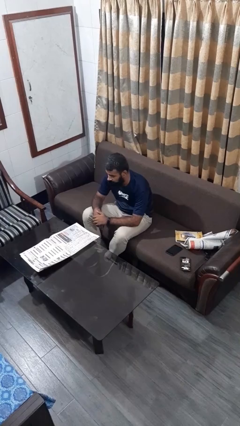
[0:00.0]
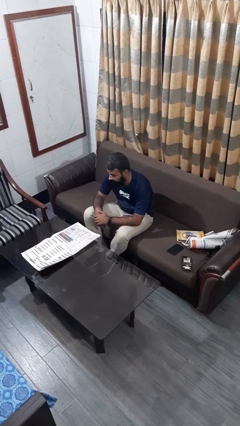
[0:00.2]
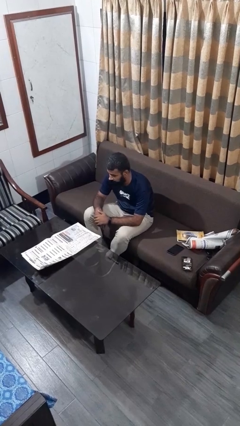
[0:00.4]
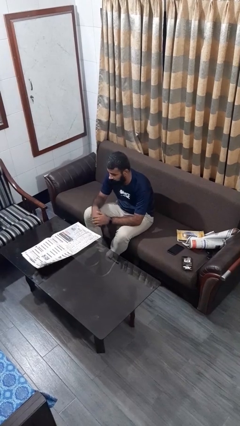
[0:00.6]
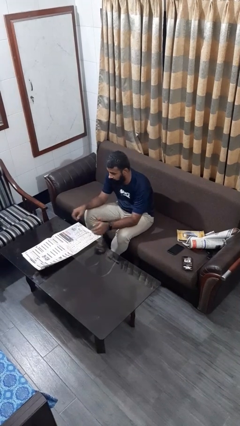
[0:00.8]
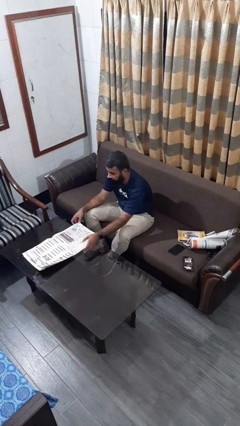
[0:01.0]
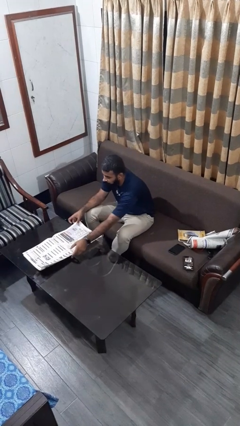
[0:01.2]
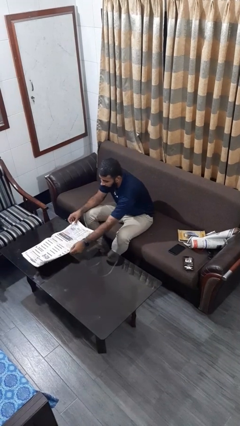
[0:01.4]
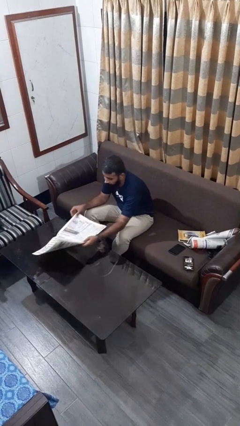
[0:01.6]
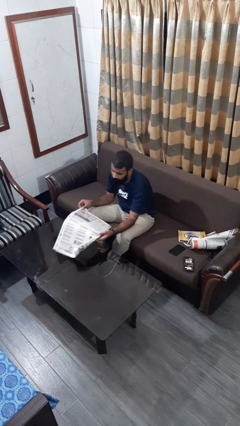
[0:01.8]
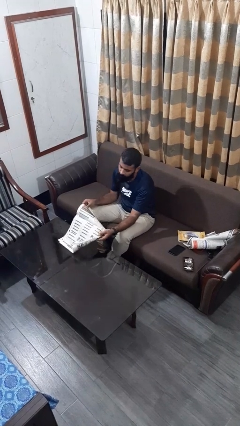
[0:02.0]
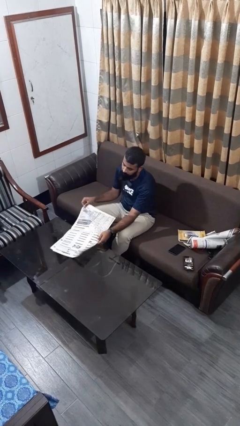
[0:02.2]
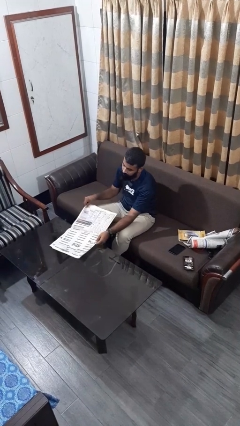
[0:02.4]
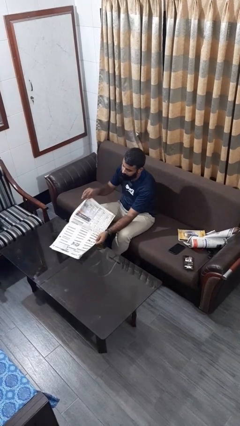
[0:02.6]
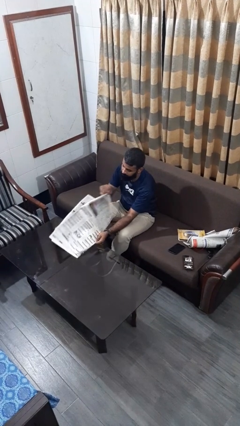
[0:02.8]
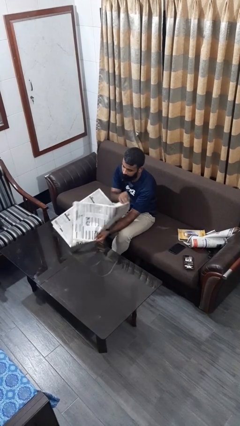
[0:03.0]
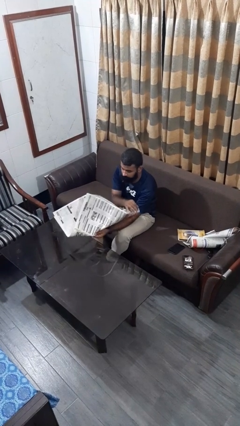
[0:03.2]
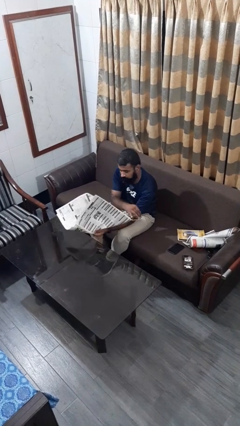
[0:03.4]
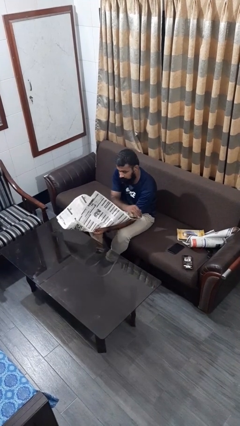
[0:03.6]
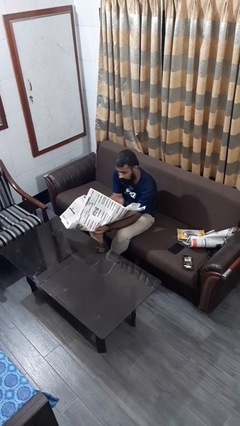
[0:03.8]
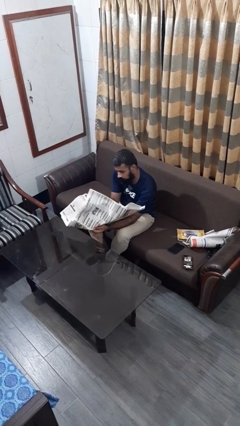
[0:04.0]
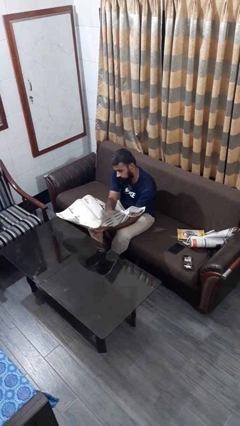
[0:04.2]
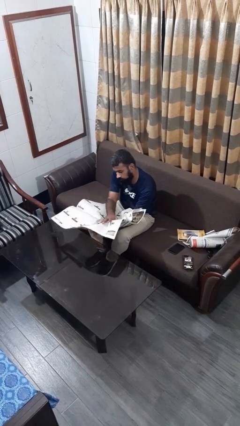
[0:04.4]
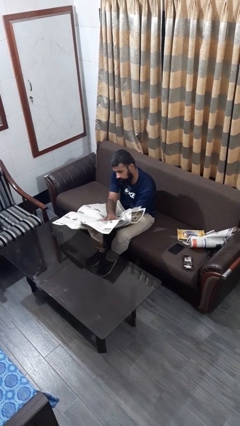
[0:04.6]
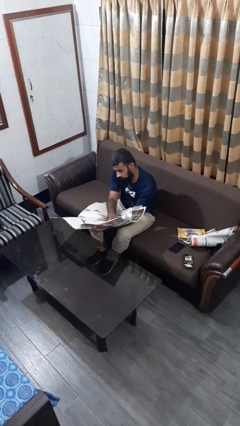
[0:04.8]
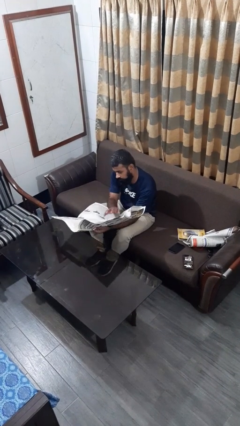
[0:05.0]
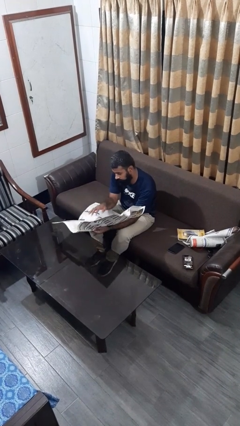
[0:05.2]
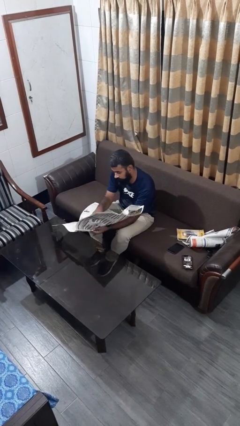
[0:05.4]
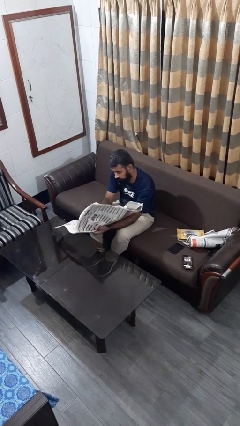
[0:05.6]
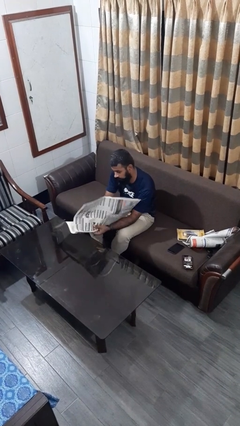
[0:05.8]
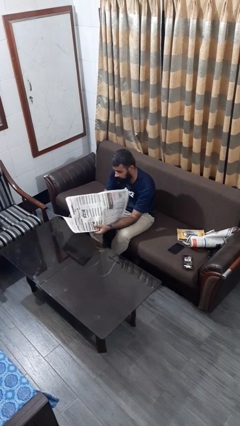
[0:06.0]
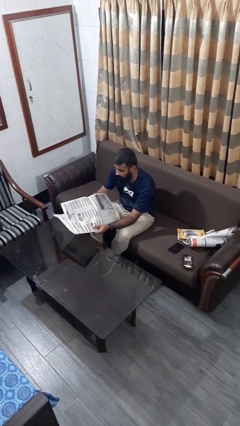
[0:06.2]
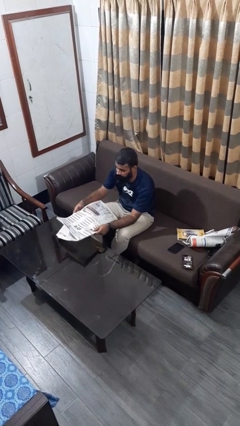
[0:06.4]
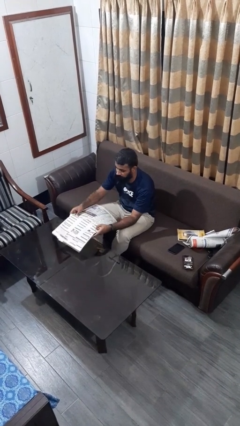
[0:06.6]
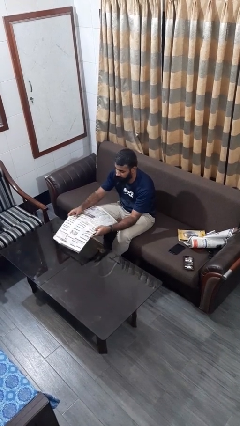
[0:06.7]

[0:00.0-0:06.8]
person reads newspaper

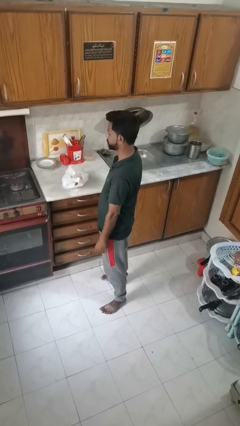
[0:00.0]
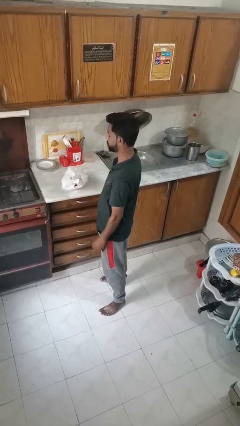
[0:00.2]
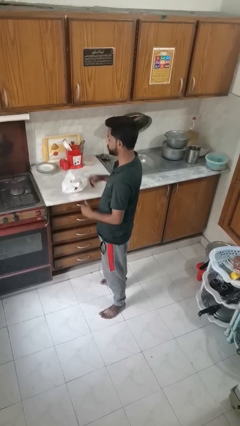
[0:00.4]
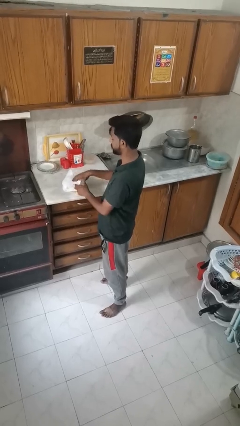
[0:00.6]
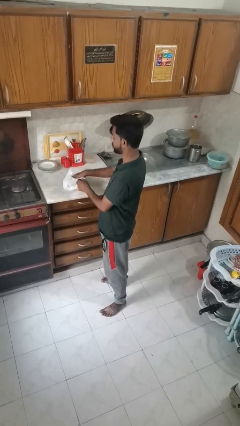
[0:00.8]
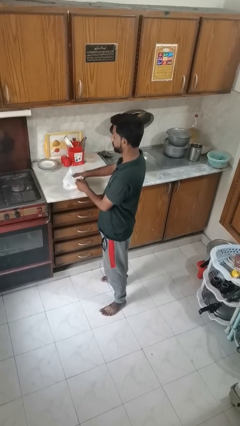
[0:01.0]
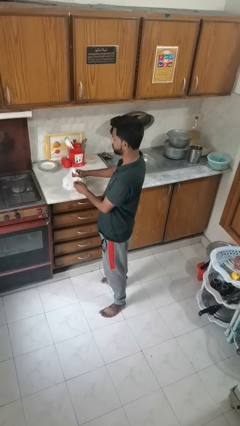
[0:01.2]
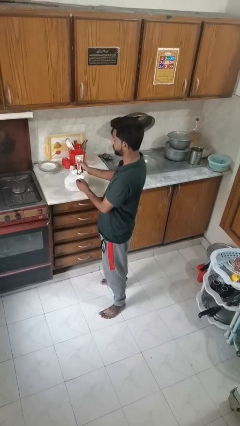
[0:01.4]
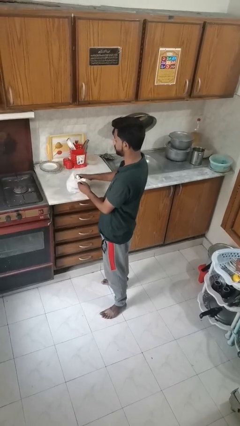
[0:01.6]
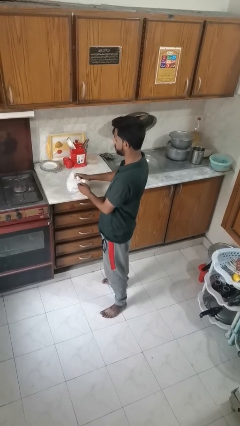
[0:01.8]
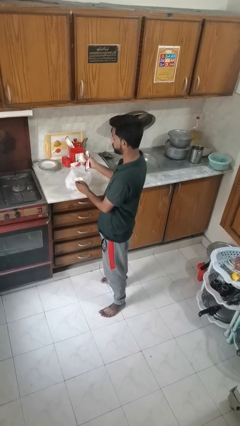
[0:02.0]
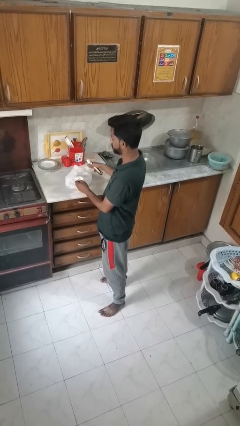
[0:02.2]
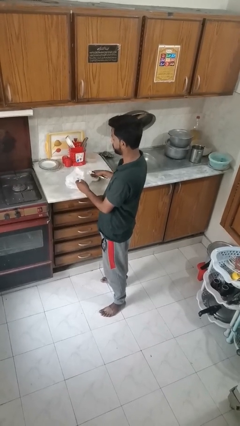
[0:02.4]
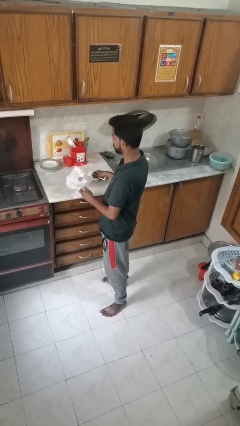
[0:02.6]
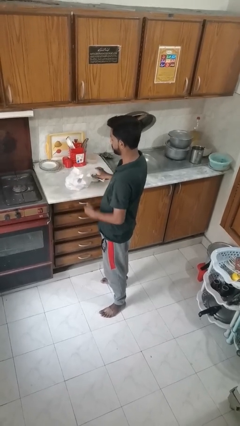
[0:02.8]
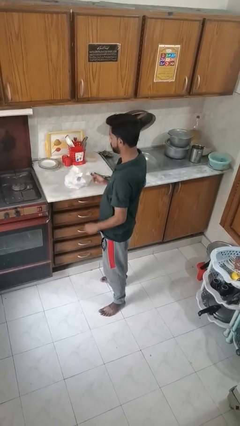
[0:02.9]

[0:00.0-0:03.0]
person takes object from bag

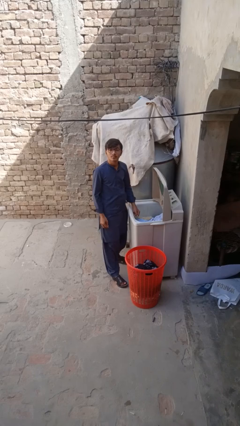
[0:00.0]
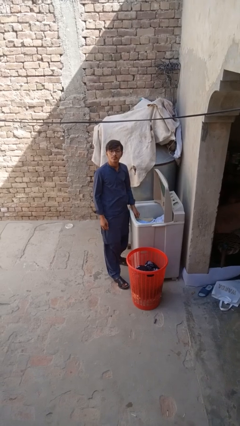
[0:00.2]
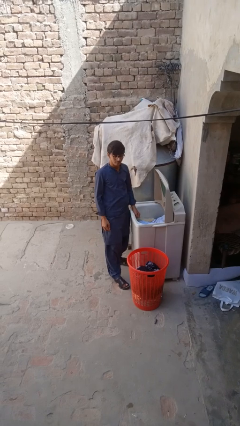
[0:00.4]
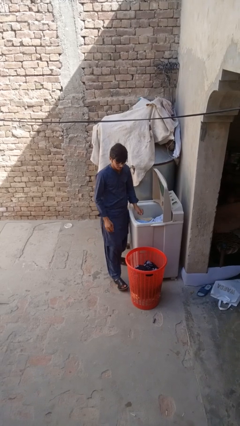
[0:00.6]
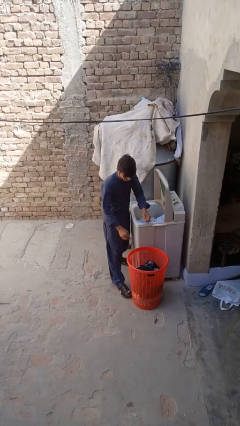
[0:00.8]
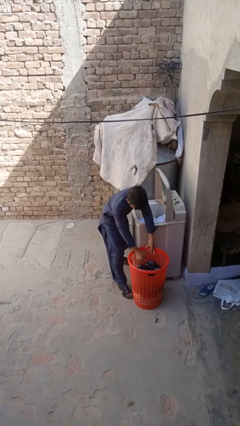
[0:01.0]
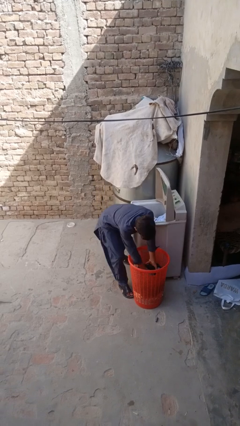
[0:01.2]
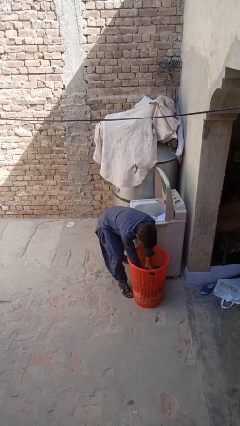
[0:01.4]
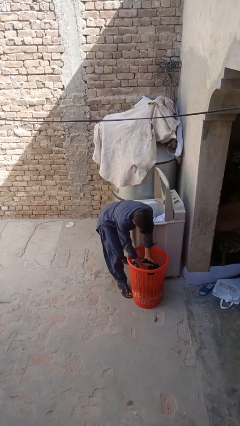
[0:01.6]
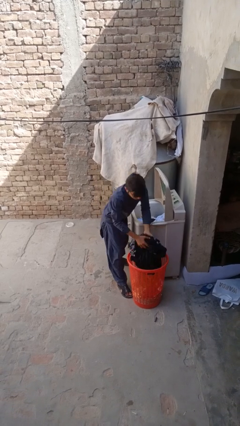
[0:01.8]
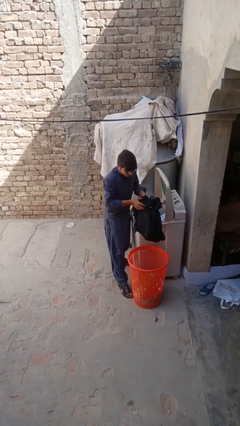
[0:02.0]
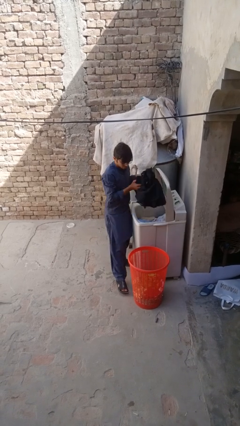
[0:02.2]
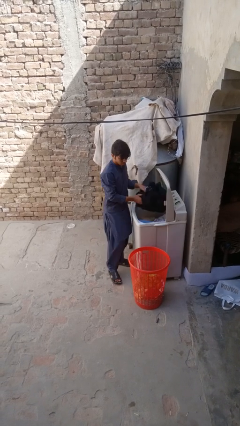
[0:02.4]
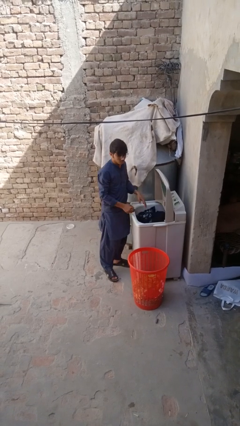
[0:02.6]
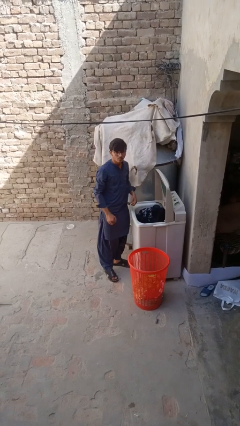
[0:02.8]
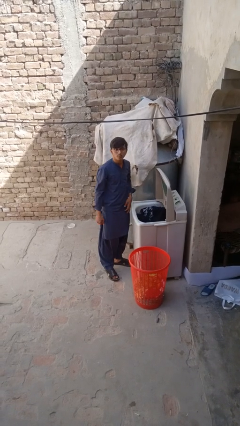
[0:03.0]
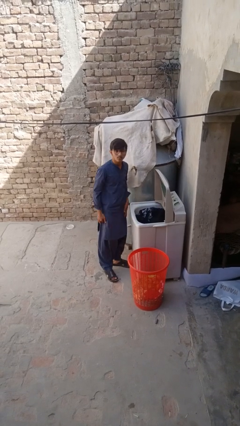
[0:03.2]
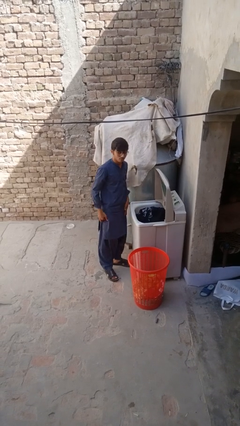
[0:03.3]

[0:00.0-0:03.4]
person loads clotheswasher

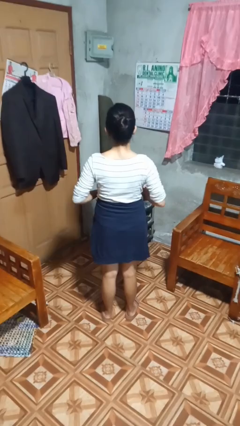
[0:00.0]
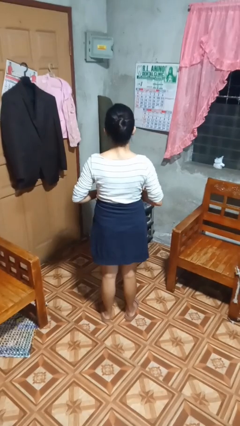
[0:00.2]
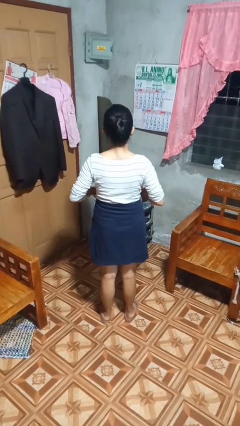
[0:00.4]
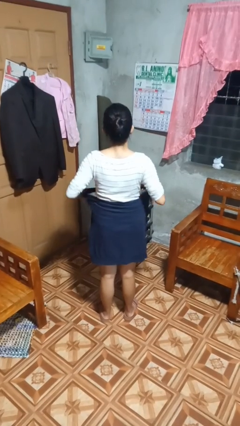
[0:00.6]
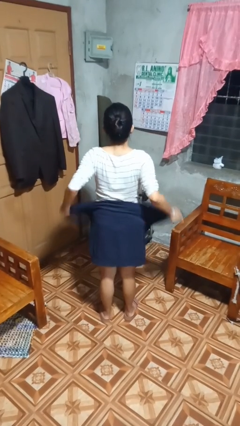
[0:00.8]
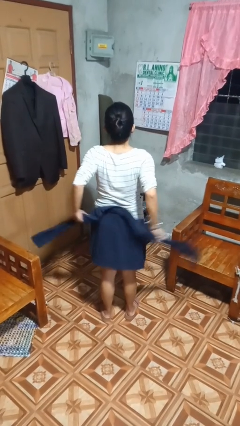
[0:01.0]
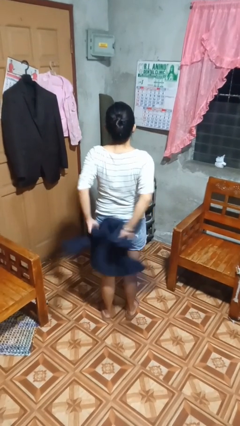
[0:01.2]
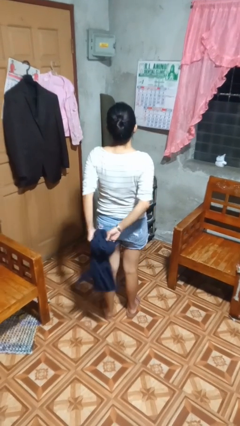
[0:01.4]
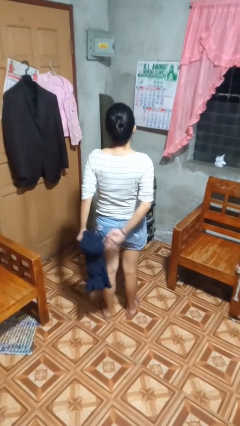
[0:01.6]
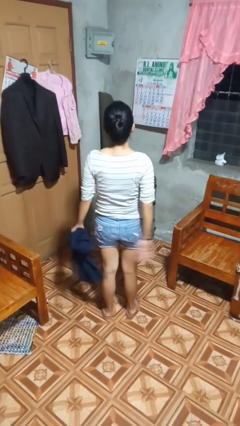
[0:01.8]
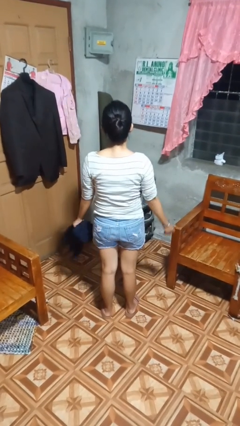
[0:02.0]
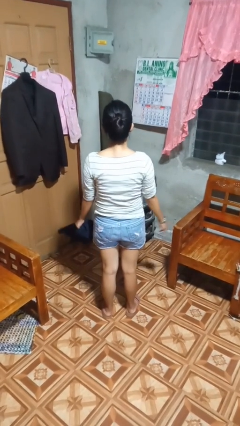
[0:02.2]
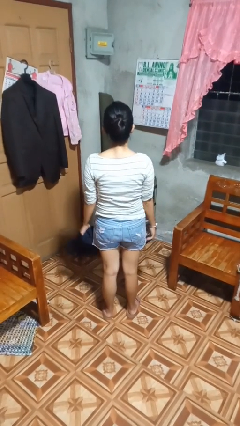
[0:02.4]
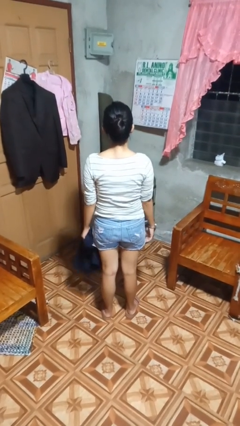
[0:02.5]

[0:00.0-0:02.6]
person unties jacket around waist

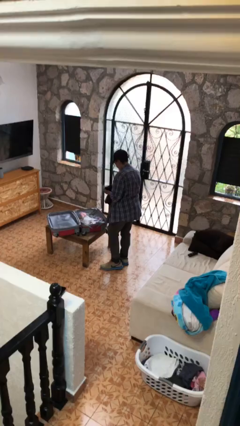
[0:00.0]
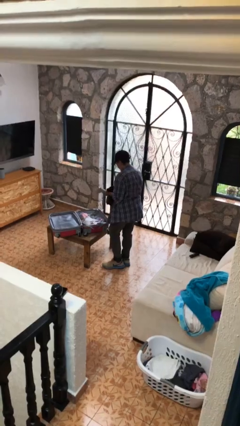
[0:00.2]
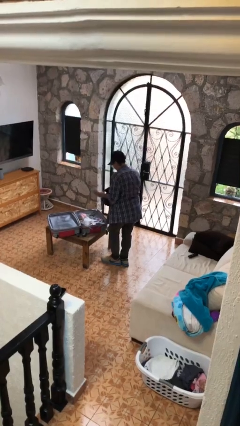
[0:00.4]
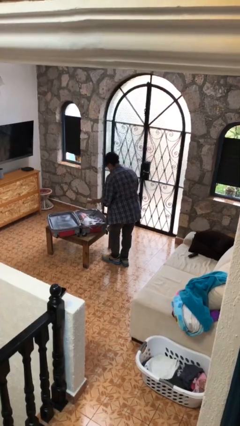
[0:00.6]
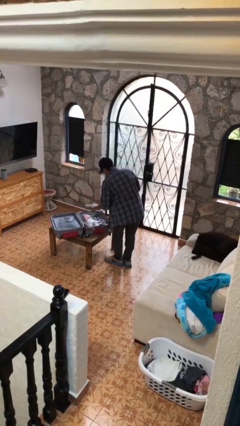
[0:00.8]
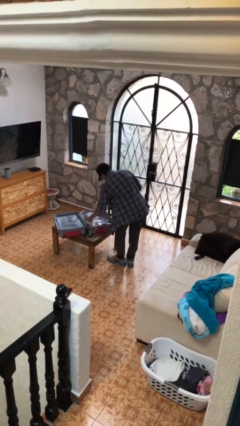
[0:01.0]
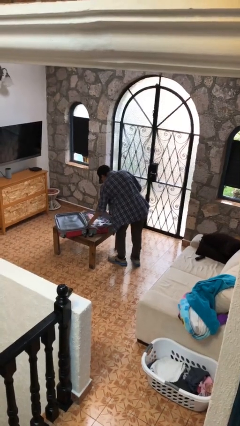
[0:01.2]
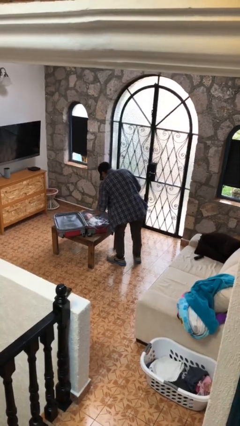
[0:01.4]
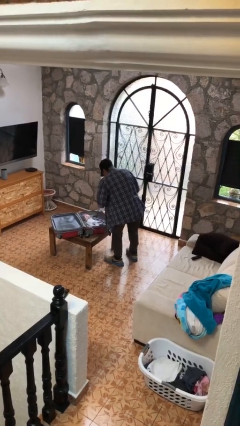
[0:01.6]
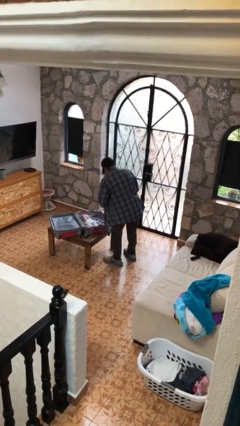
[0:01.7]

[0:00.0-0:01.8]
person loads clothes into suitcase
